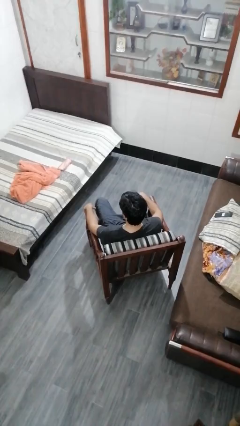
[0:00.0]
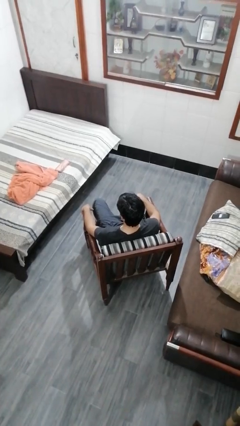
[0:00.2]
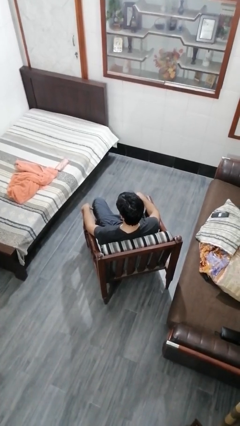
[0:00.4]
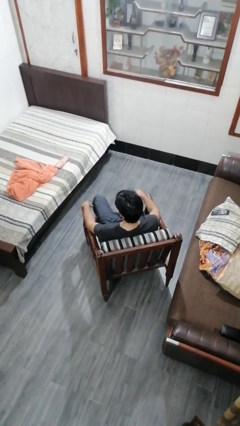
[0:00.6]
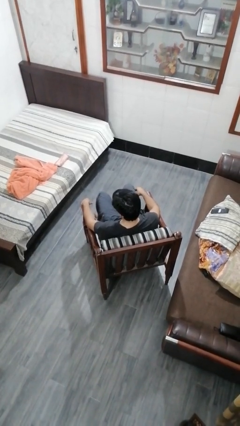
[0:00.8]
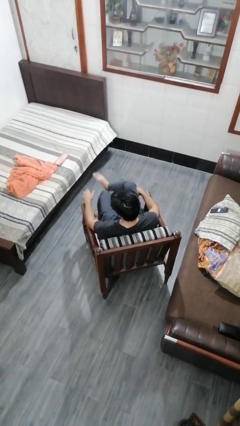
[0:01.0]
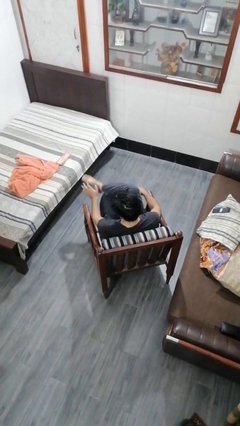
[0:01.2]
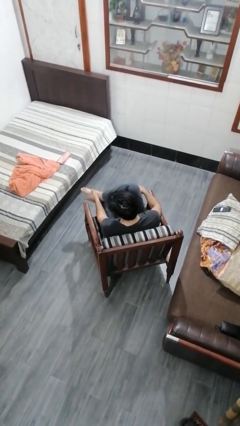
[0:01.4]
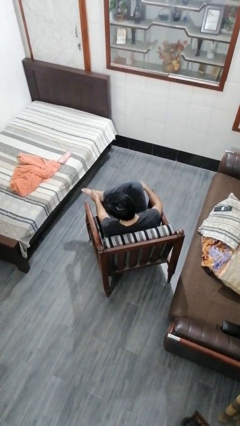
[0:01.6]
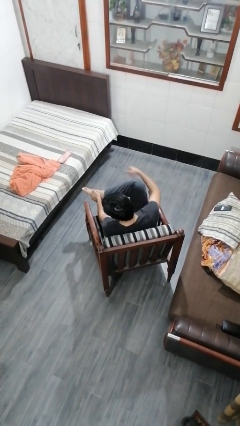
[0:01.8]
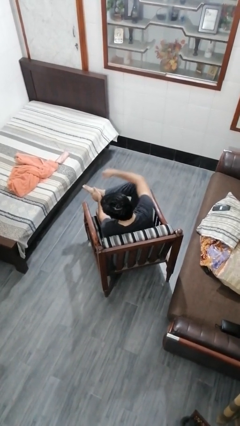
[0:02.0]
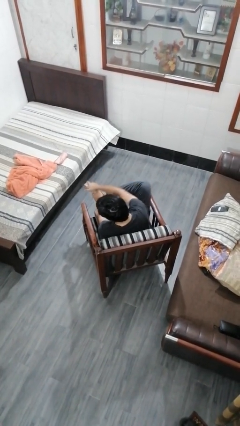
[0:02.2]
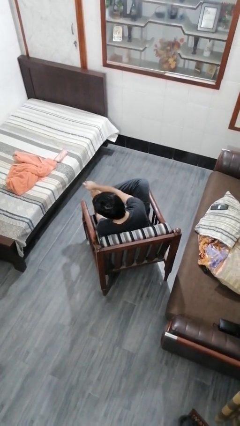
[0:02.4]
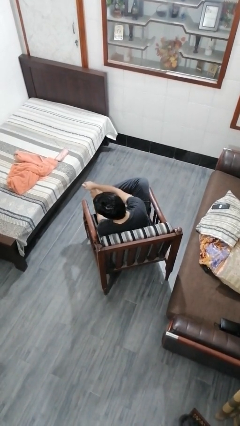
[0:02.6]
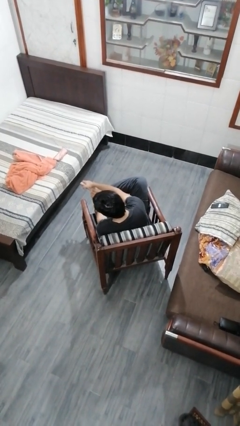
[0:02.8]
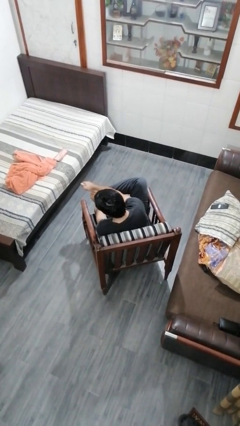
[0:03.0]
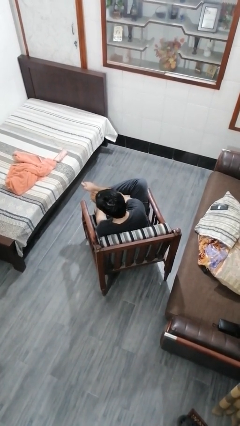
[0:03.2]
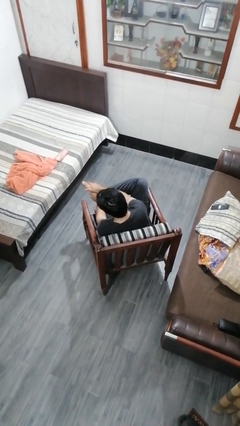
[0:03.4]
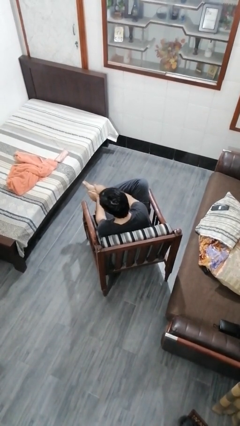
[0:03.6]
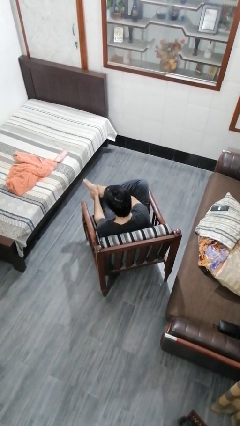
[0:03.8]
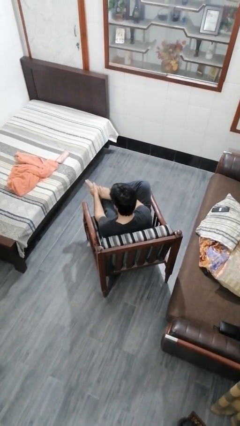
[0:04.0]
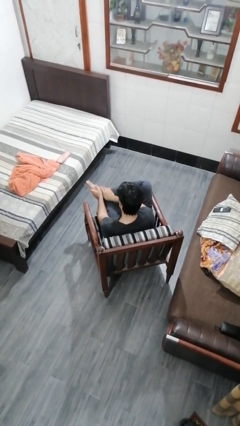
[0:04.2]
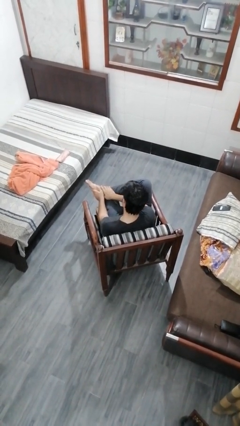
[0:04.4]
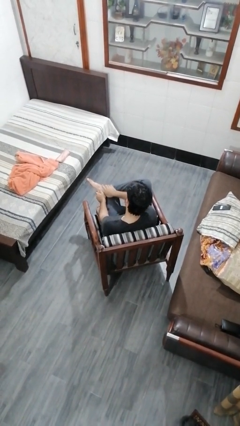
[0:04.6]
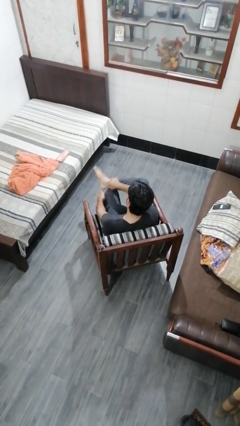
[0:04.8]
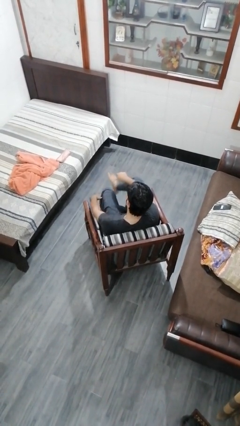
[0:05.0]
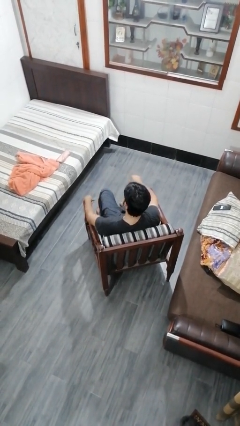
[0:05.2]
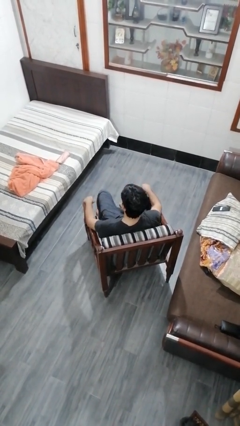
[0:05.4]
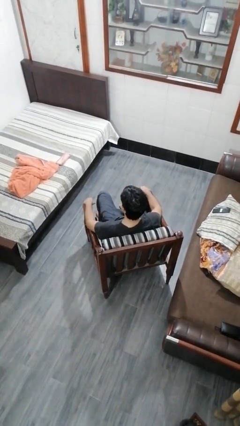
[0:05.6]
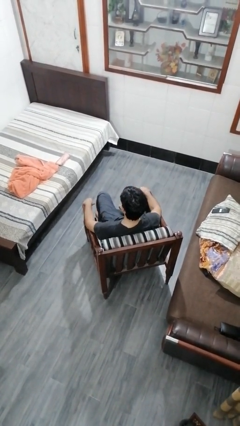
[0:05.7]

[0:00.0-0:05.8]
person rubs foot

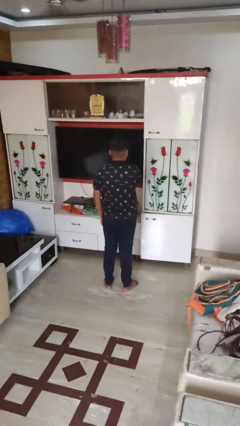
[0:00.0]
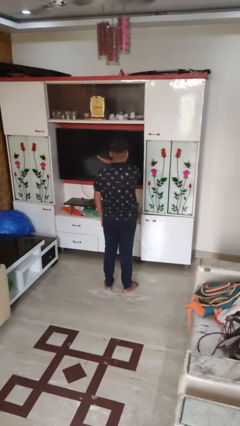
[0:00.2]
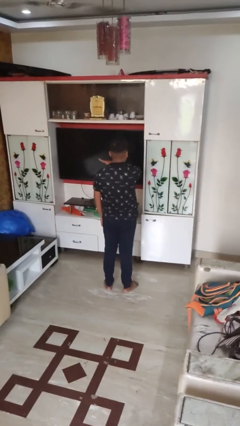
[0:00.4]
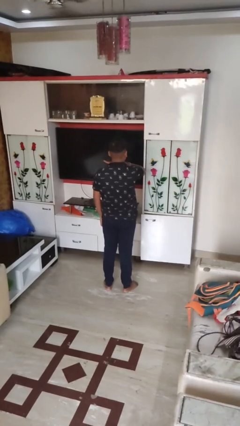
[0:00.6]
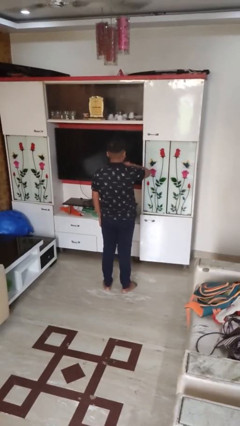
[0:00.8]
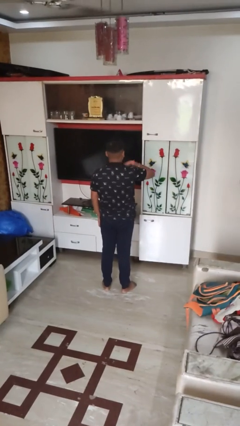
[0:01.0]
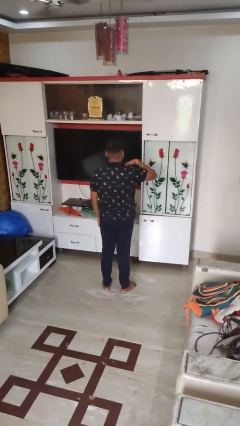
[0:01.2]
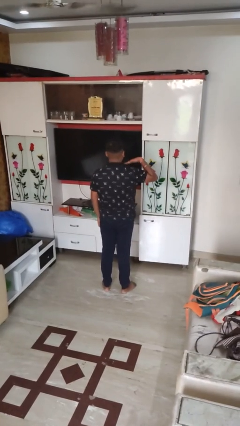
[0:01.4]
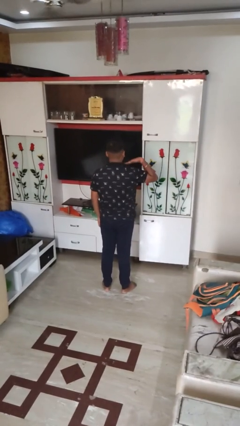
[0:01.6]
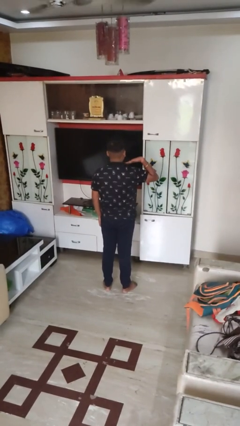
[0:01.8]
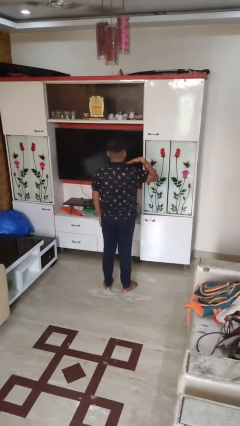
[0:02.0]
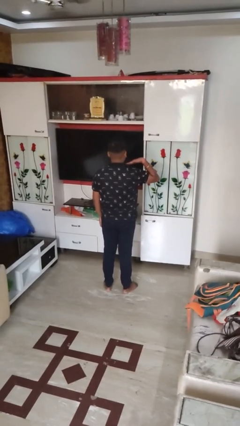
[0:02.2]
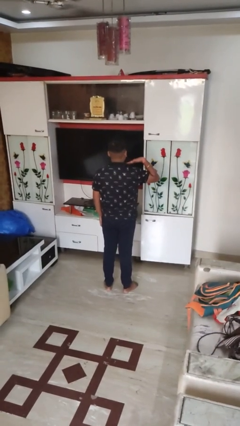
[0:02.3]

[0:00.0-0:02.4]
person gestures cut

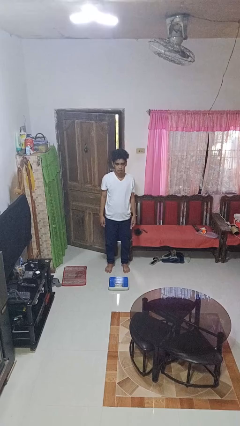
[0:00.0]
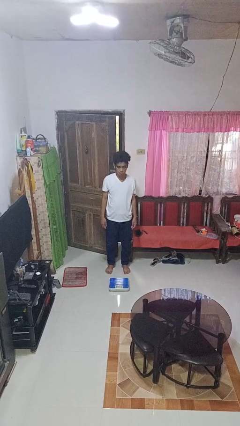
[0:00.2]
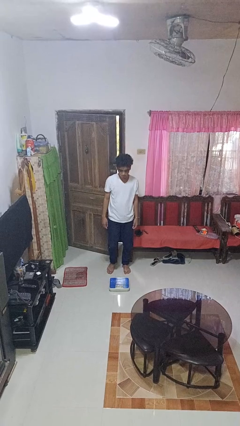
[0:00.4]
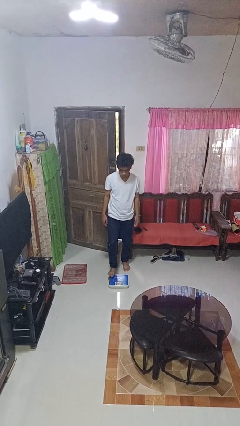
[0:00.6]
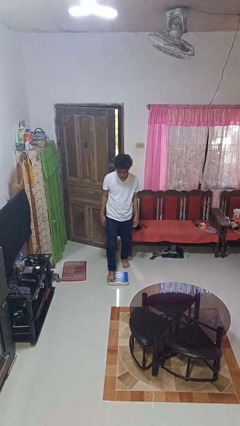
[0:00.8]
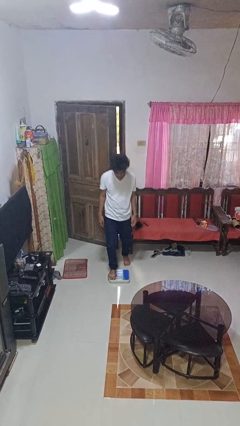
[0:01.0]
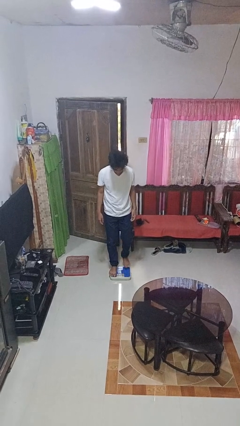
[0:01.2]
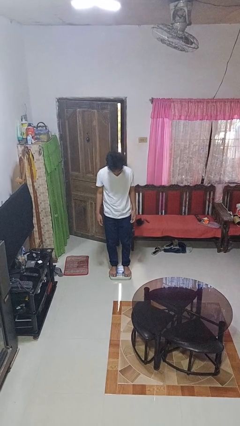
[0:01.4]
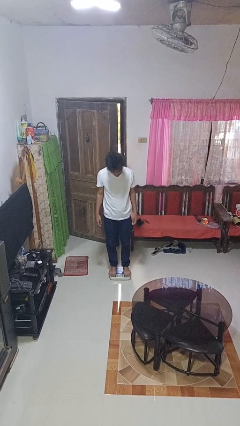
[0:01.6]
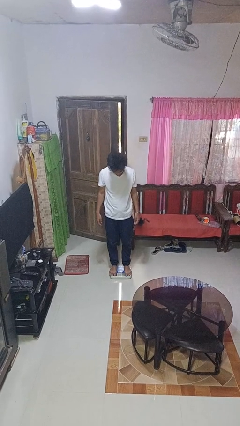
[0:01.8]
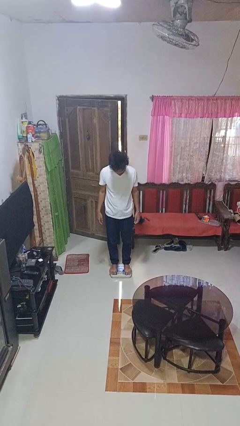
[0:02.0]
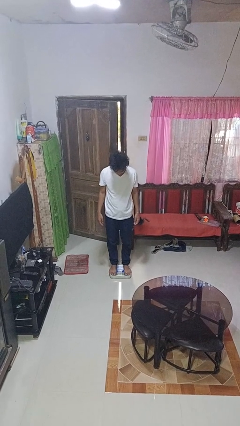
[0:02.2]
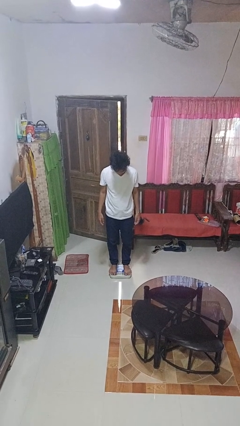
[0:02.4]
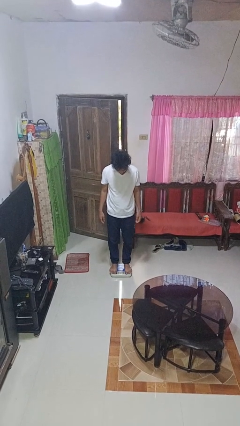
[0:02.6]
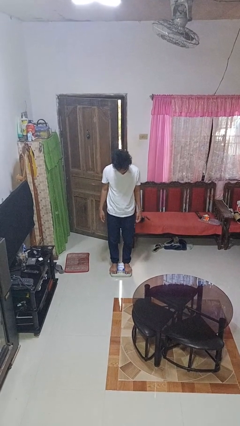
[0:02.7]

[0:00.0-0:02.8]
person uses bodyweight scale

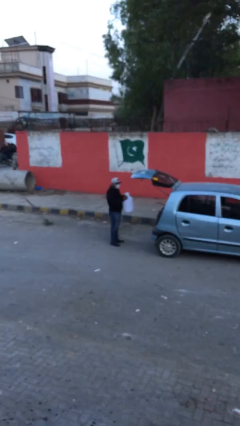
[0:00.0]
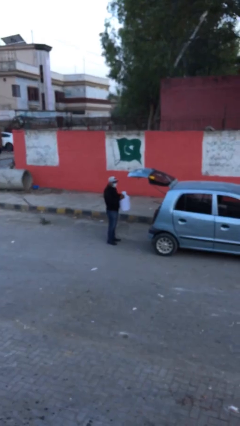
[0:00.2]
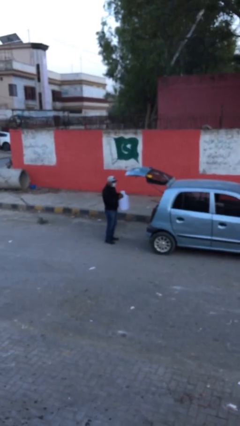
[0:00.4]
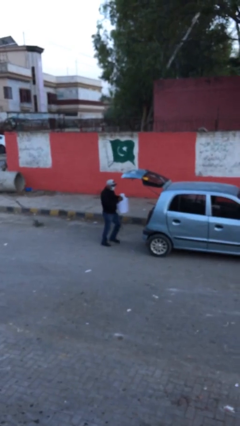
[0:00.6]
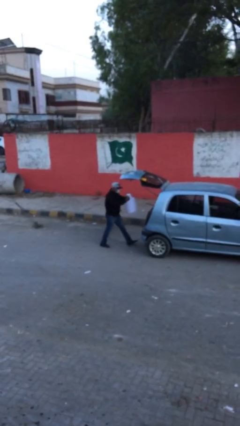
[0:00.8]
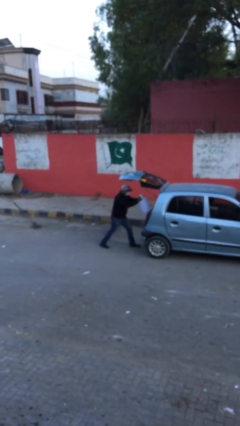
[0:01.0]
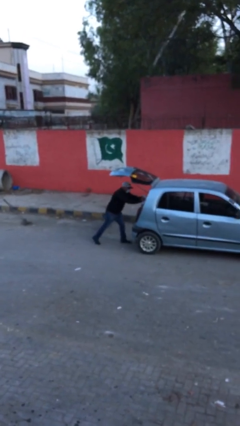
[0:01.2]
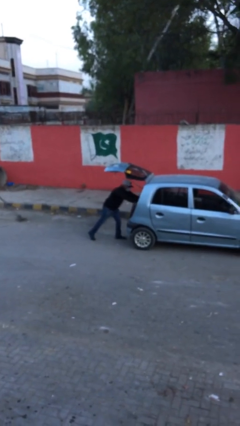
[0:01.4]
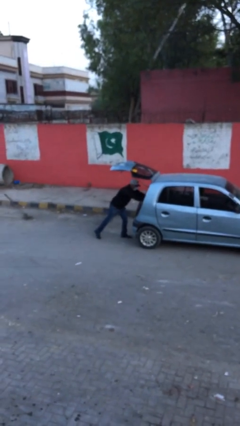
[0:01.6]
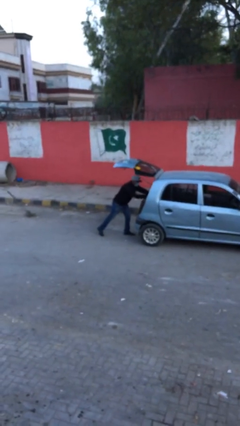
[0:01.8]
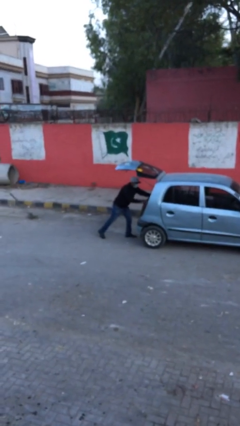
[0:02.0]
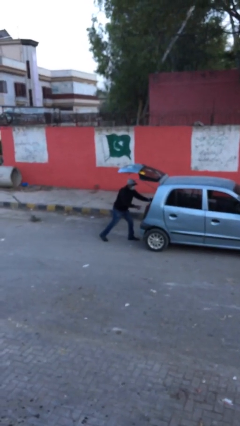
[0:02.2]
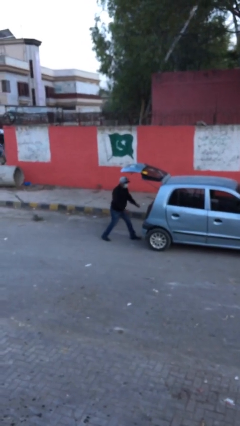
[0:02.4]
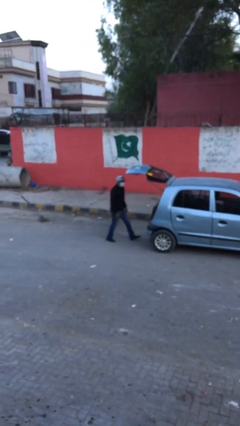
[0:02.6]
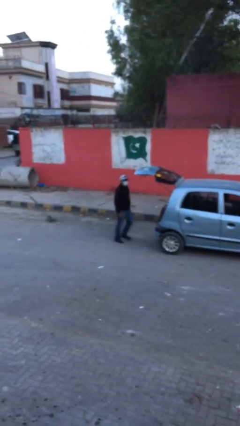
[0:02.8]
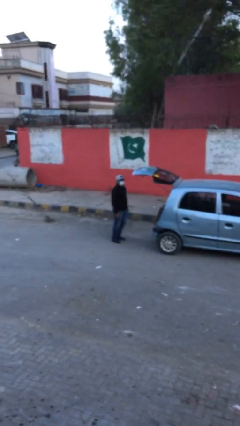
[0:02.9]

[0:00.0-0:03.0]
person loads car

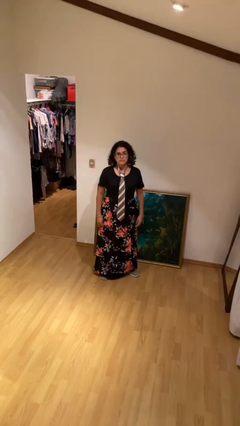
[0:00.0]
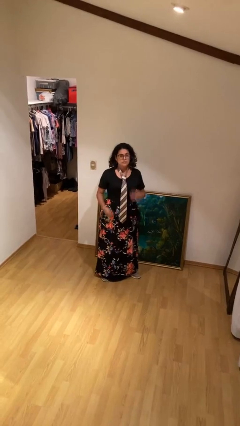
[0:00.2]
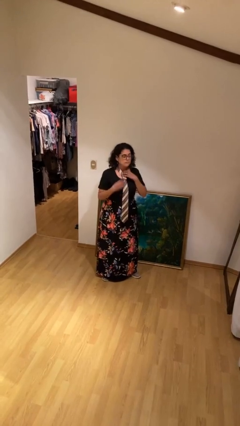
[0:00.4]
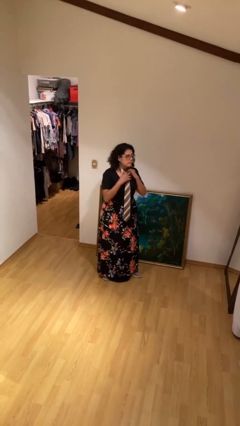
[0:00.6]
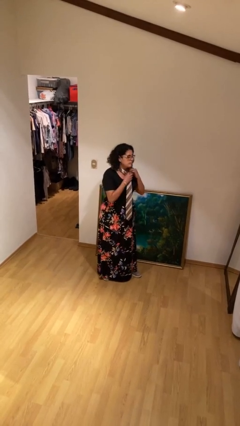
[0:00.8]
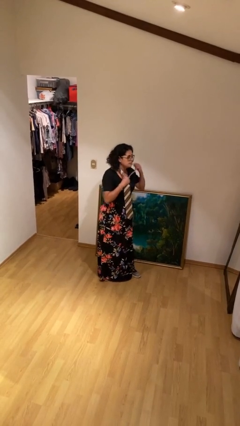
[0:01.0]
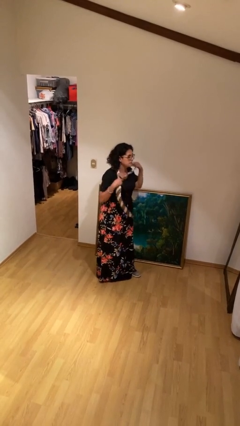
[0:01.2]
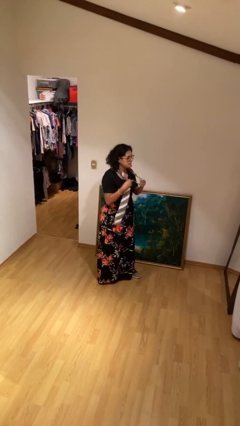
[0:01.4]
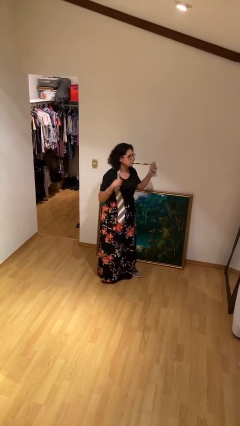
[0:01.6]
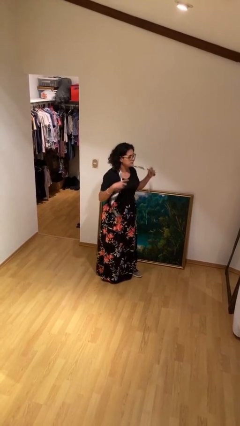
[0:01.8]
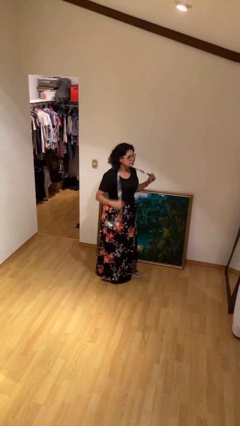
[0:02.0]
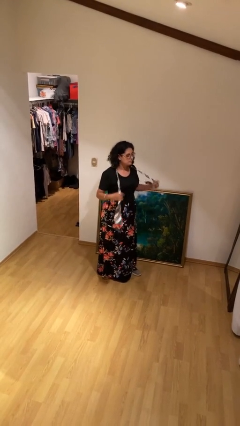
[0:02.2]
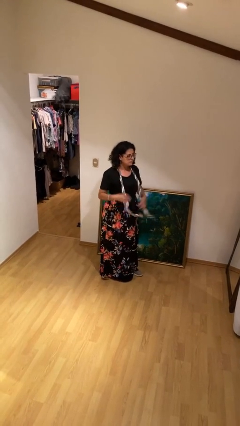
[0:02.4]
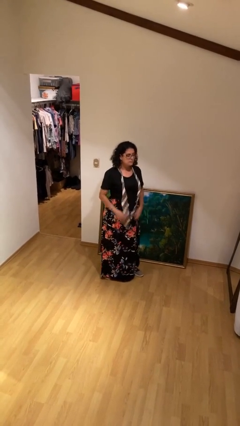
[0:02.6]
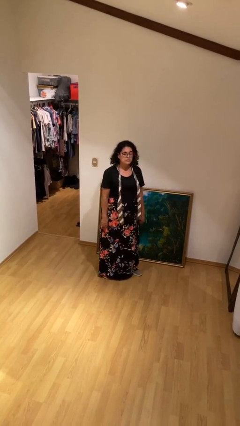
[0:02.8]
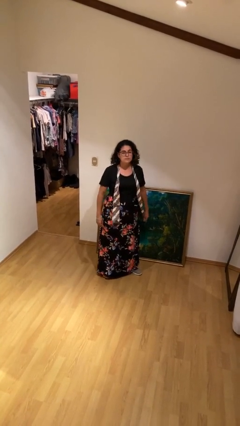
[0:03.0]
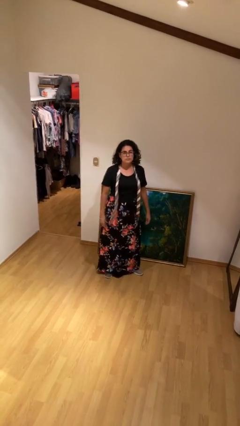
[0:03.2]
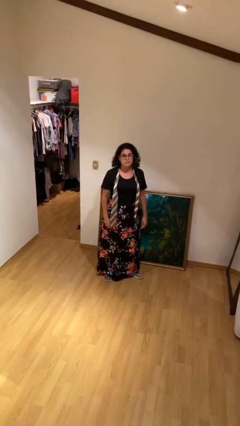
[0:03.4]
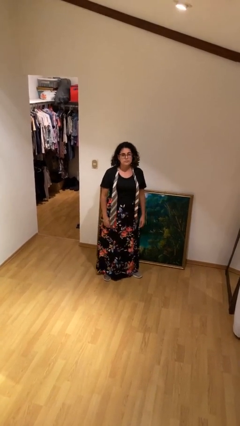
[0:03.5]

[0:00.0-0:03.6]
person takes off necktie
